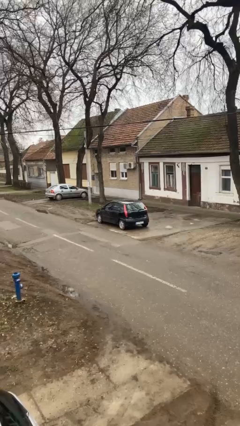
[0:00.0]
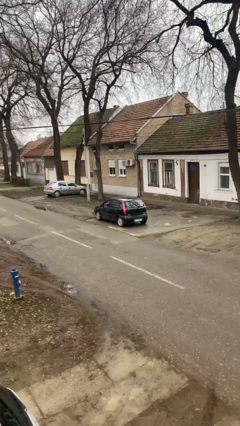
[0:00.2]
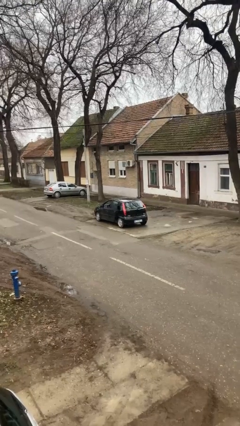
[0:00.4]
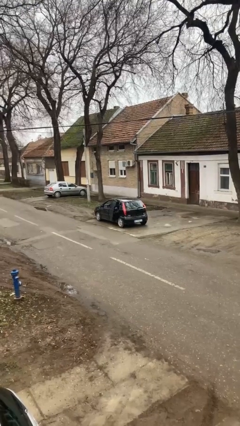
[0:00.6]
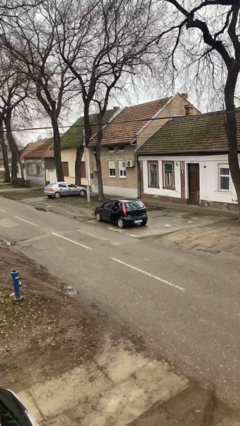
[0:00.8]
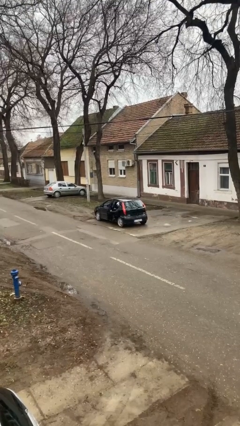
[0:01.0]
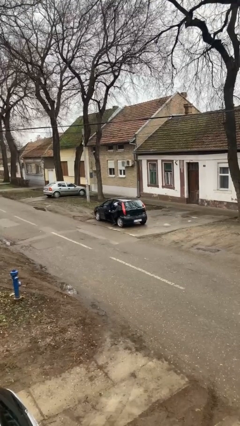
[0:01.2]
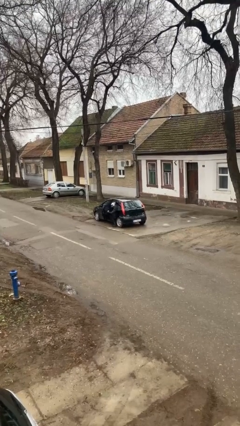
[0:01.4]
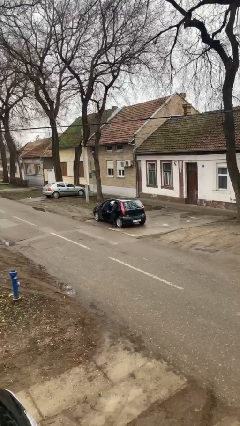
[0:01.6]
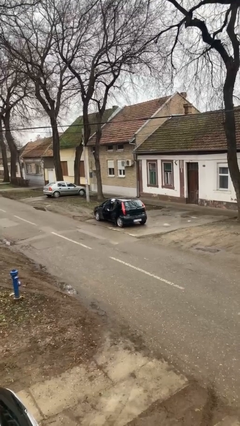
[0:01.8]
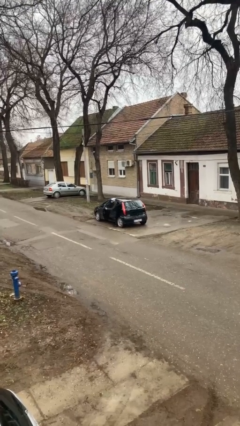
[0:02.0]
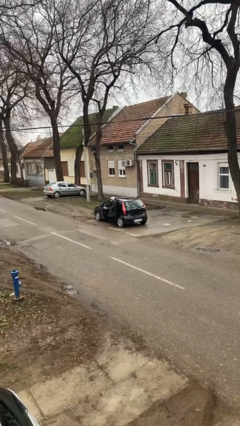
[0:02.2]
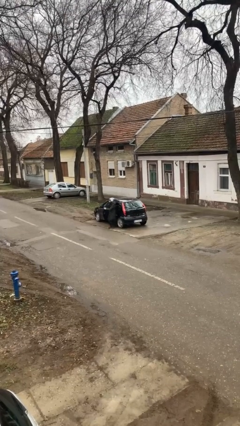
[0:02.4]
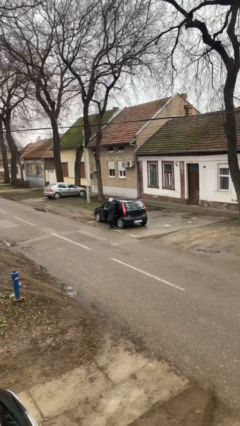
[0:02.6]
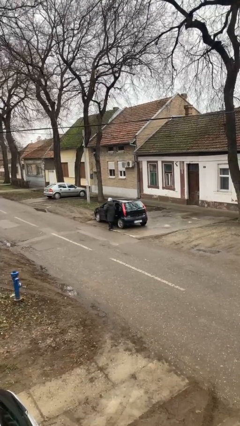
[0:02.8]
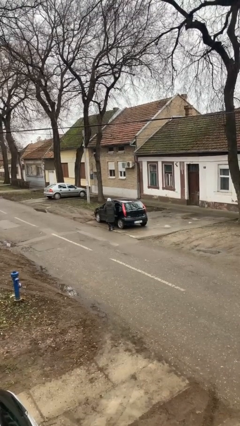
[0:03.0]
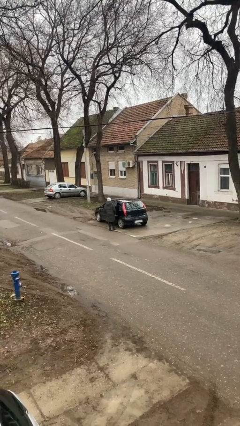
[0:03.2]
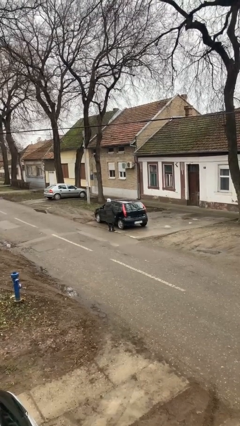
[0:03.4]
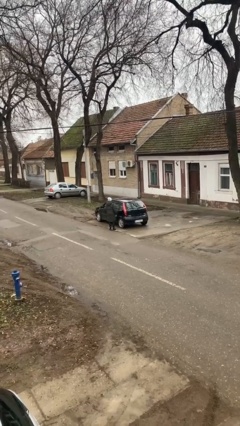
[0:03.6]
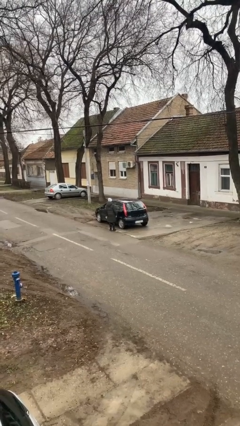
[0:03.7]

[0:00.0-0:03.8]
car drops off person

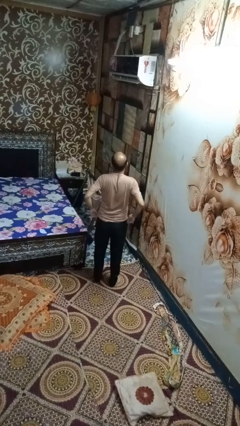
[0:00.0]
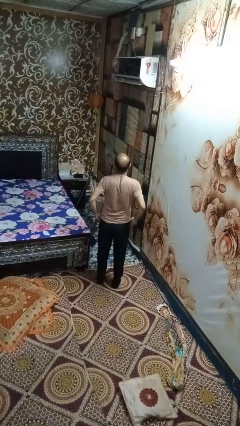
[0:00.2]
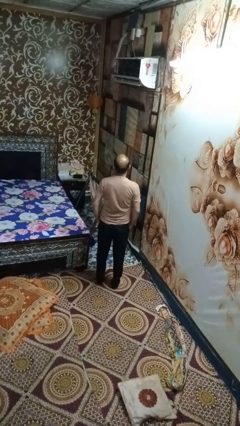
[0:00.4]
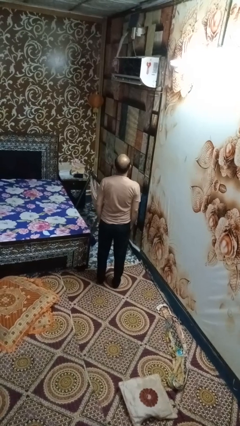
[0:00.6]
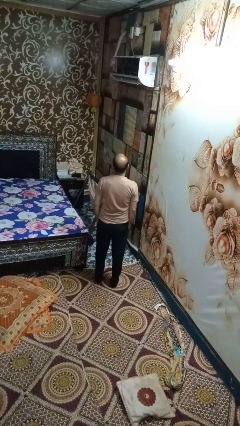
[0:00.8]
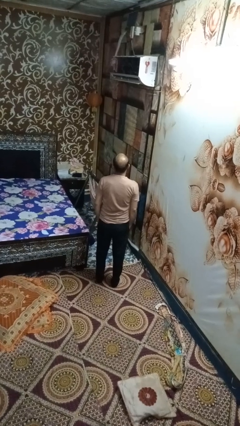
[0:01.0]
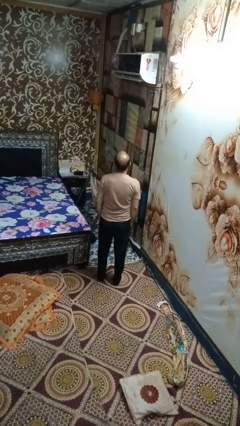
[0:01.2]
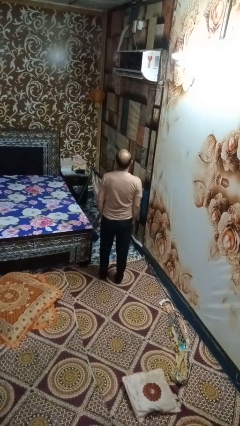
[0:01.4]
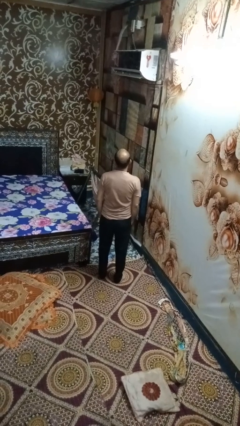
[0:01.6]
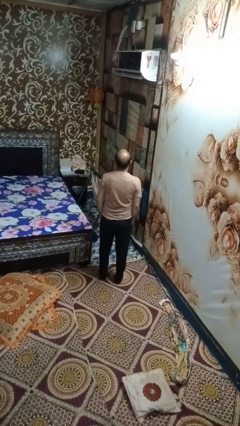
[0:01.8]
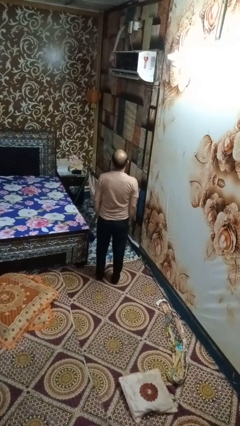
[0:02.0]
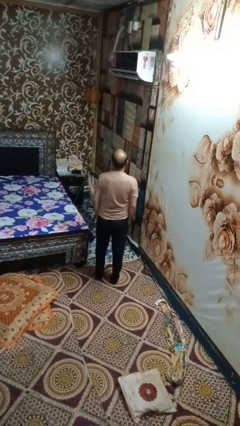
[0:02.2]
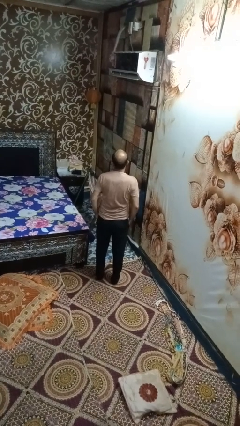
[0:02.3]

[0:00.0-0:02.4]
person puts hands in back pockets

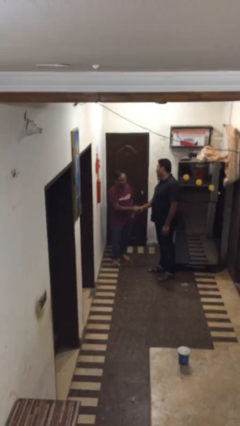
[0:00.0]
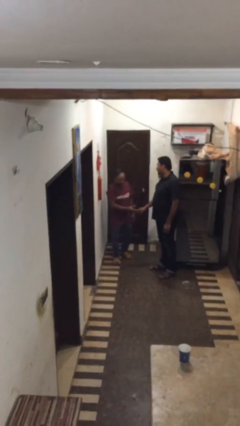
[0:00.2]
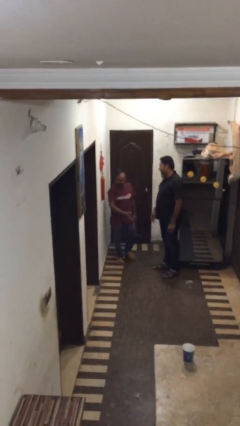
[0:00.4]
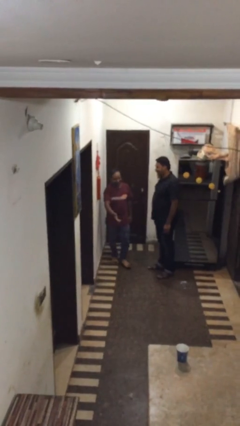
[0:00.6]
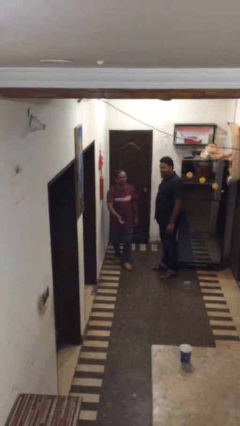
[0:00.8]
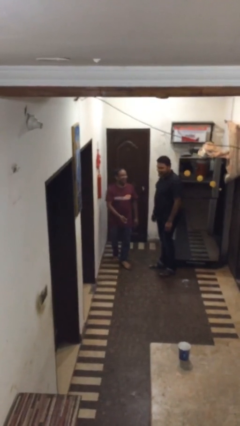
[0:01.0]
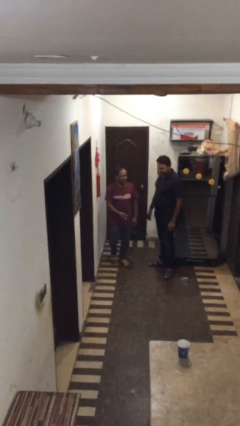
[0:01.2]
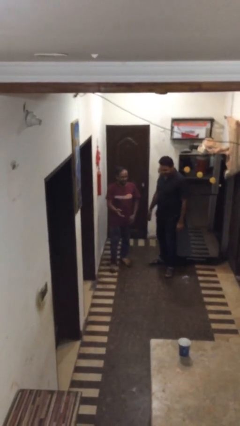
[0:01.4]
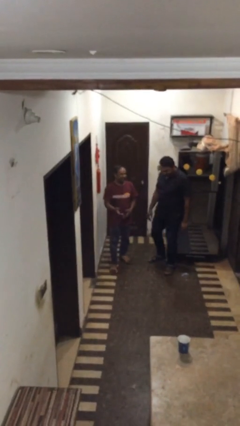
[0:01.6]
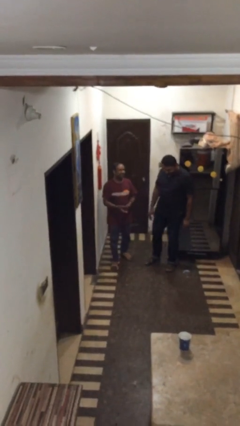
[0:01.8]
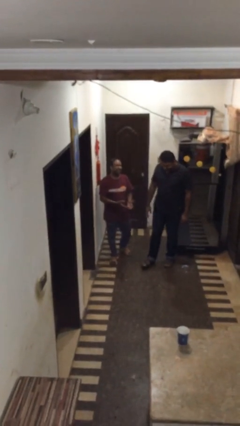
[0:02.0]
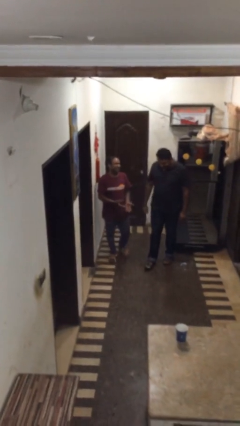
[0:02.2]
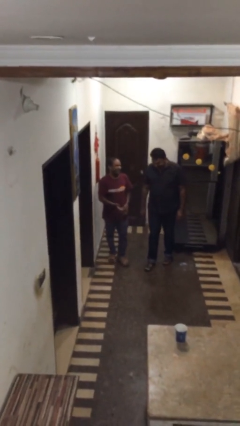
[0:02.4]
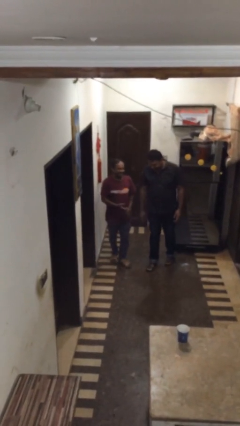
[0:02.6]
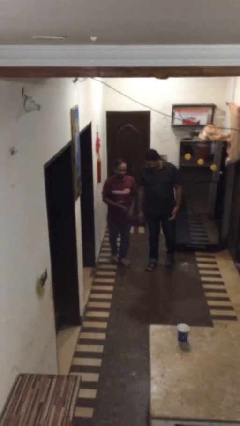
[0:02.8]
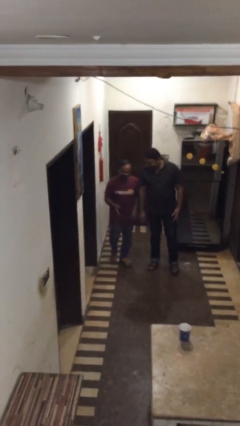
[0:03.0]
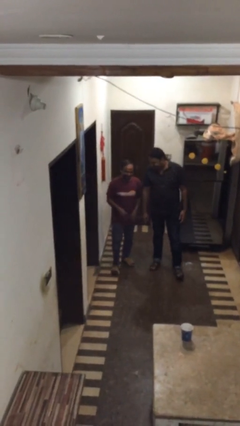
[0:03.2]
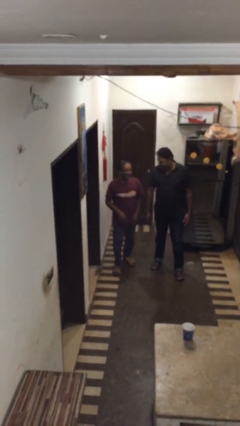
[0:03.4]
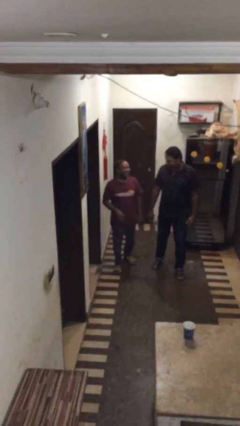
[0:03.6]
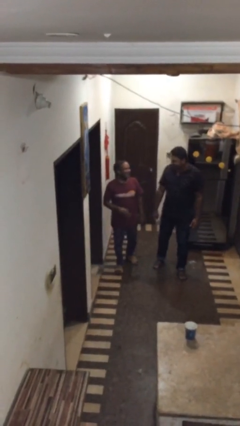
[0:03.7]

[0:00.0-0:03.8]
person talks to person

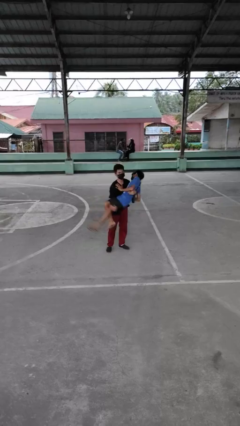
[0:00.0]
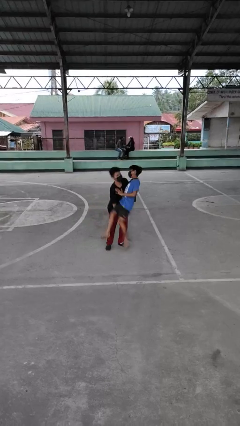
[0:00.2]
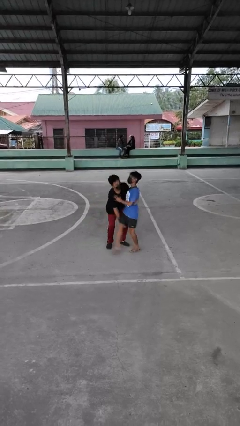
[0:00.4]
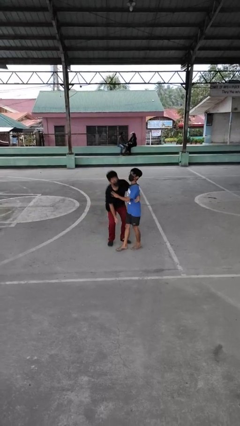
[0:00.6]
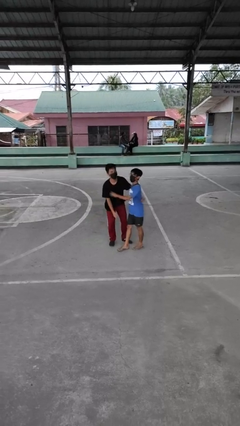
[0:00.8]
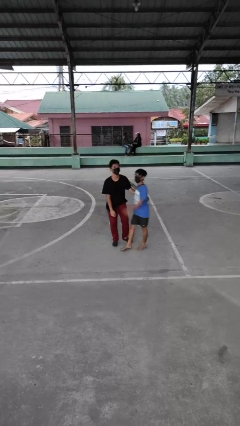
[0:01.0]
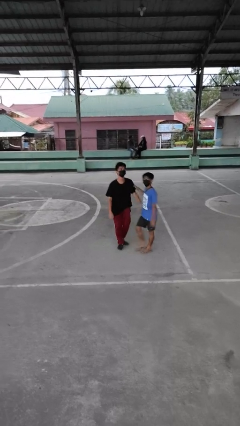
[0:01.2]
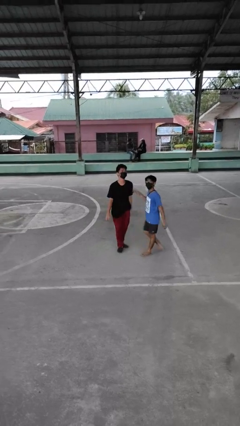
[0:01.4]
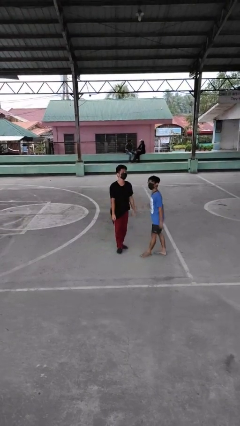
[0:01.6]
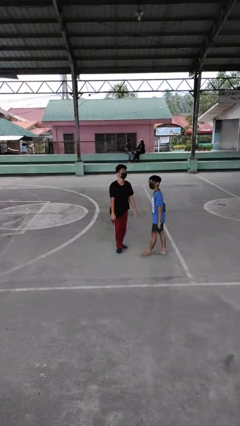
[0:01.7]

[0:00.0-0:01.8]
person puts down person

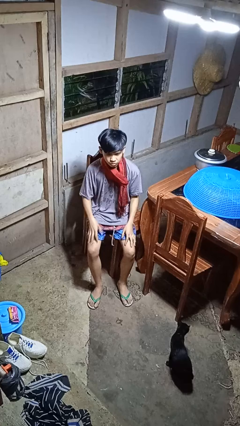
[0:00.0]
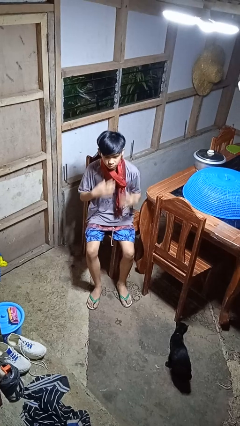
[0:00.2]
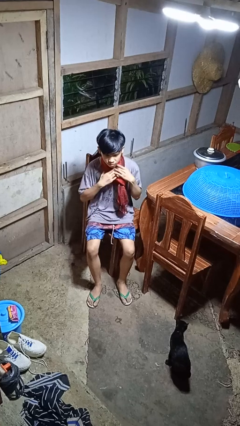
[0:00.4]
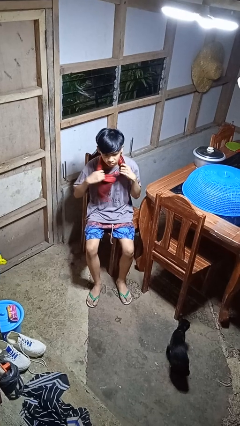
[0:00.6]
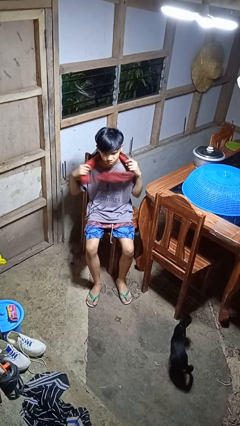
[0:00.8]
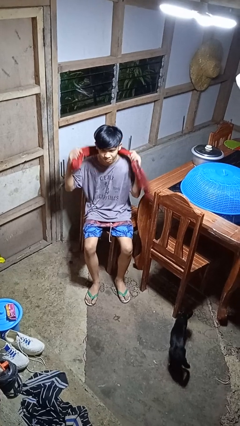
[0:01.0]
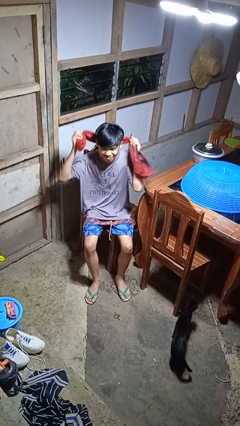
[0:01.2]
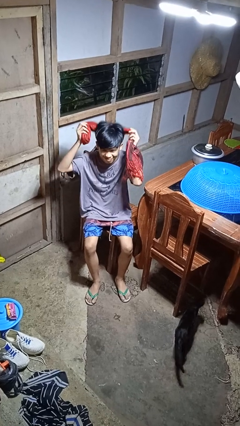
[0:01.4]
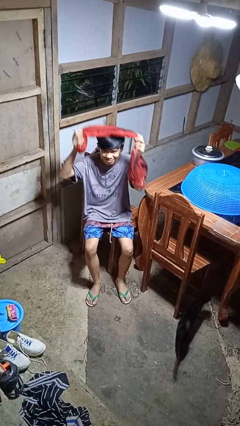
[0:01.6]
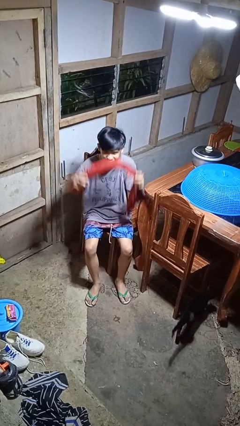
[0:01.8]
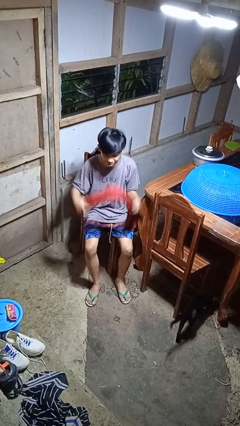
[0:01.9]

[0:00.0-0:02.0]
person takes off scarf

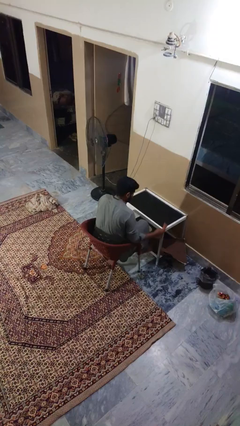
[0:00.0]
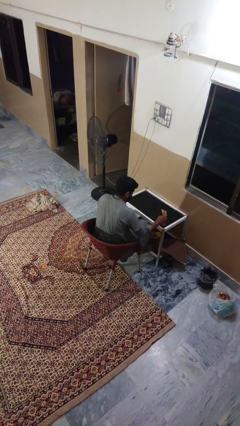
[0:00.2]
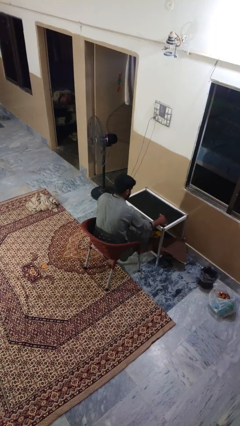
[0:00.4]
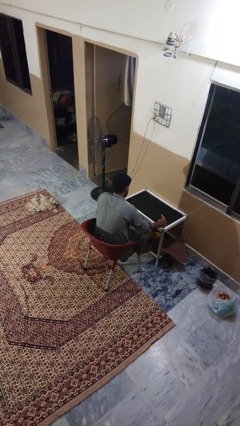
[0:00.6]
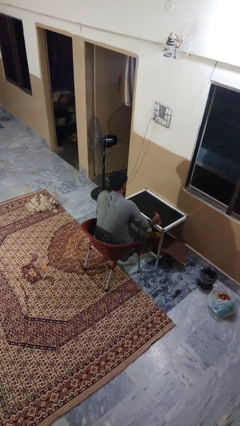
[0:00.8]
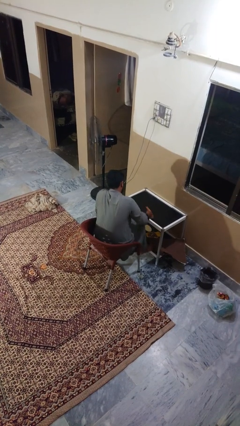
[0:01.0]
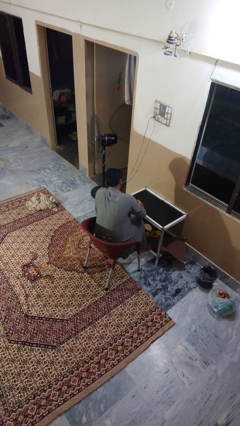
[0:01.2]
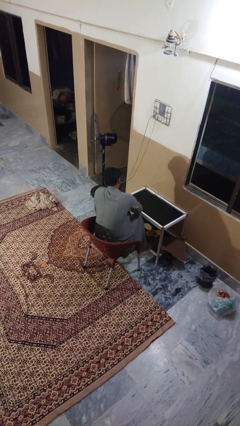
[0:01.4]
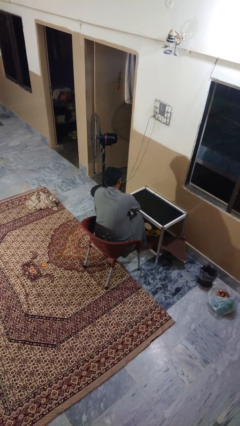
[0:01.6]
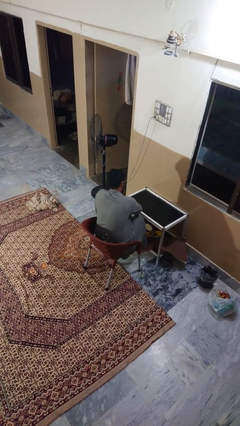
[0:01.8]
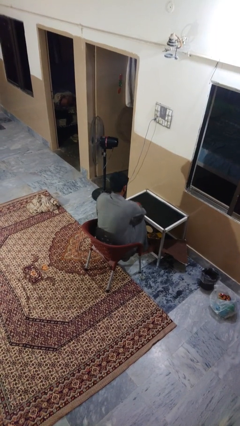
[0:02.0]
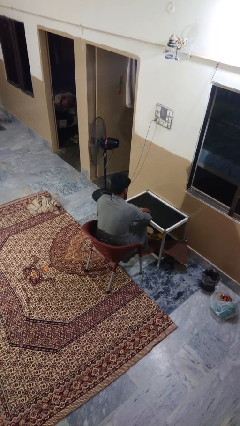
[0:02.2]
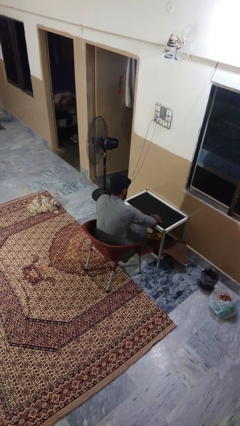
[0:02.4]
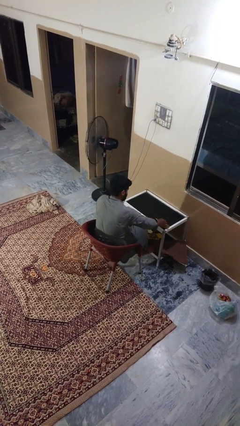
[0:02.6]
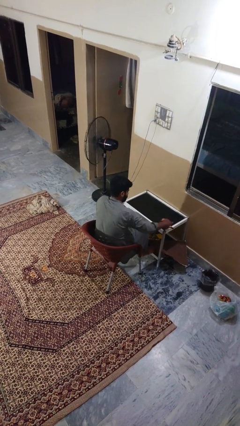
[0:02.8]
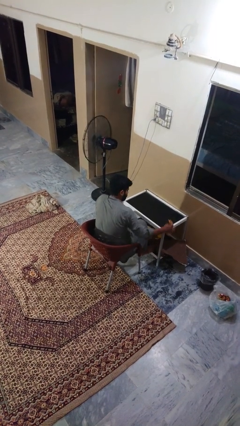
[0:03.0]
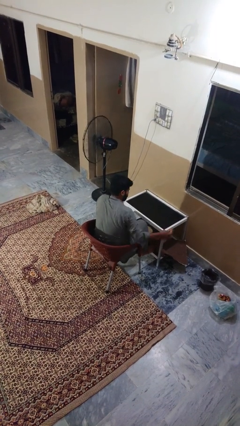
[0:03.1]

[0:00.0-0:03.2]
person cleans table with rag

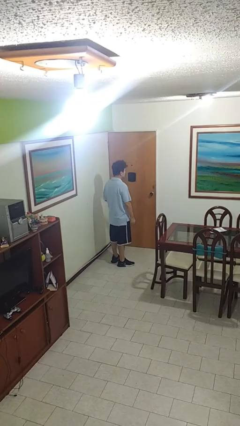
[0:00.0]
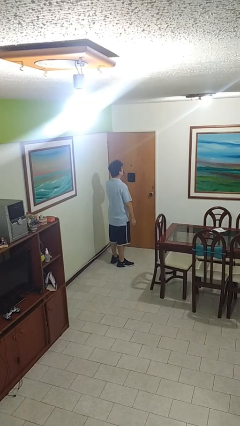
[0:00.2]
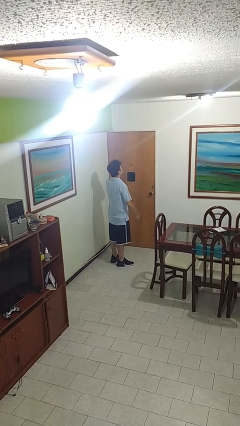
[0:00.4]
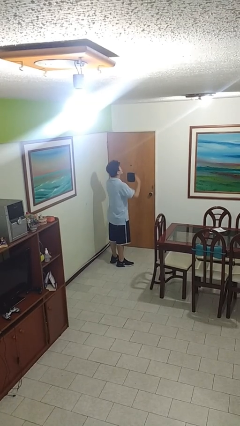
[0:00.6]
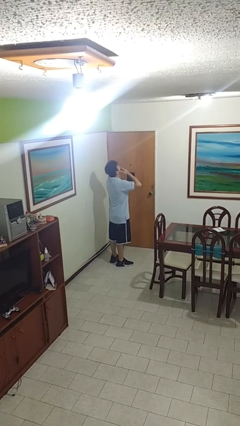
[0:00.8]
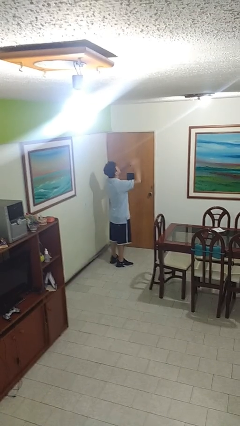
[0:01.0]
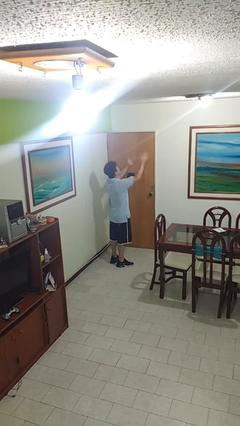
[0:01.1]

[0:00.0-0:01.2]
person gestures blow kiss
